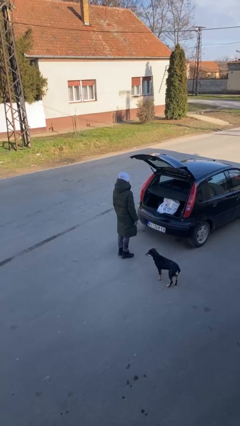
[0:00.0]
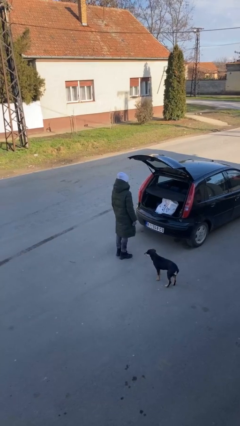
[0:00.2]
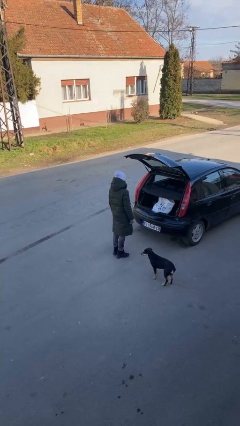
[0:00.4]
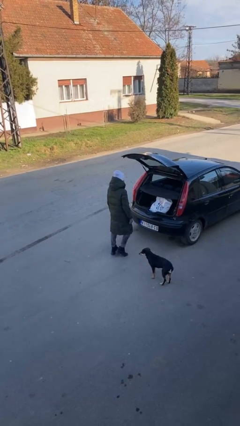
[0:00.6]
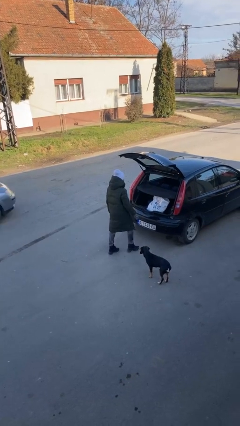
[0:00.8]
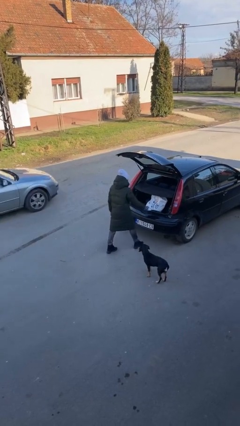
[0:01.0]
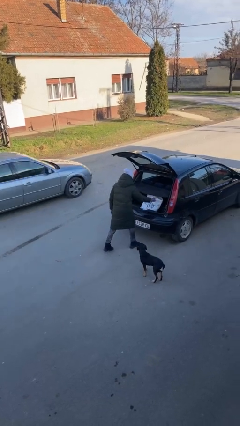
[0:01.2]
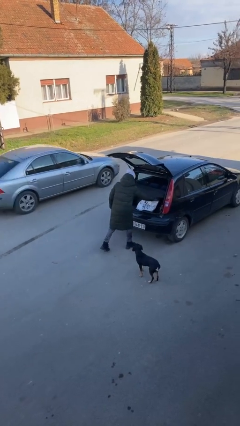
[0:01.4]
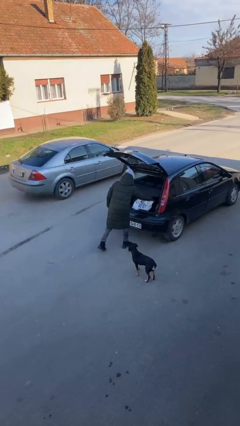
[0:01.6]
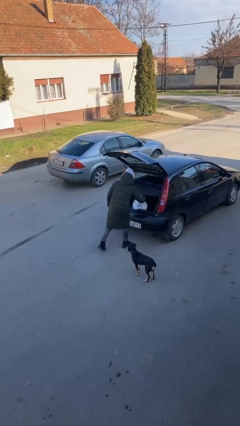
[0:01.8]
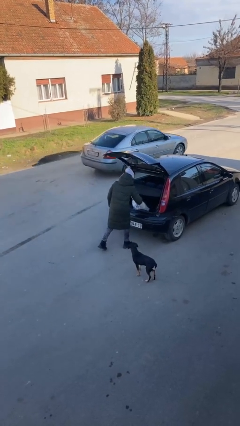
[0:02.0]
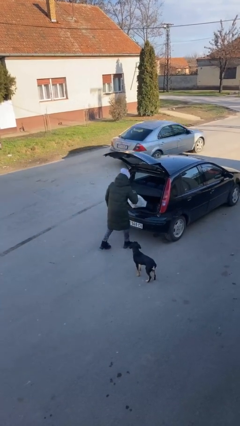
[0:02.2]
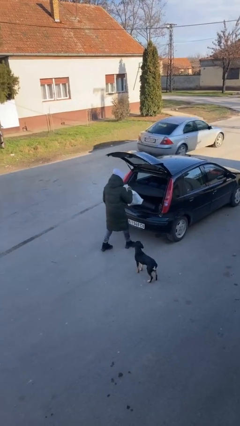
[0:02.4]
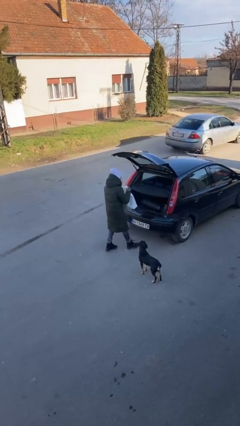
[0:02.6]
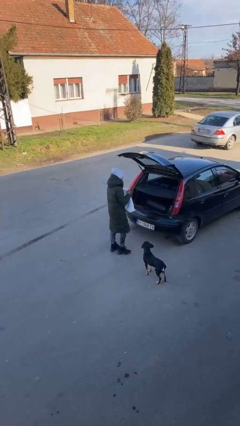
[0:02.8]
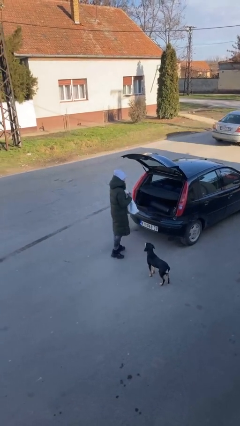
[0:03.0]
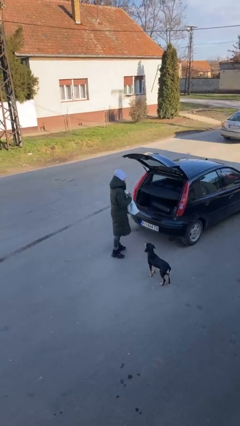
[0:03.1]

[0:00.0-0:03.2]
person unloads car

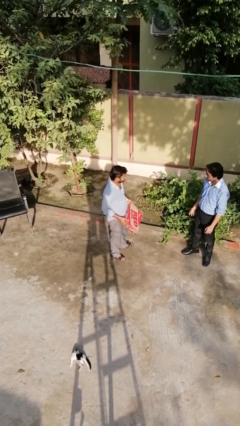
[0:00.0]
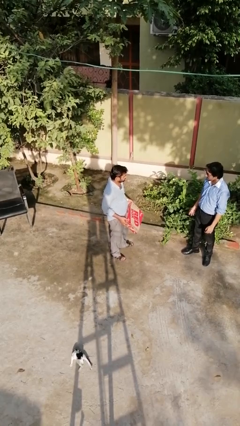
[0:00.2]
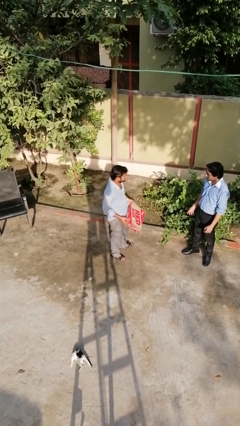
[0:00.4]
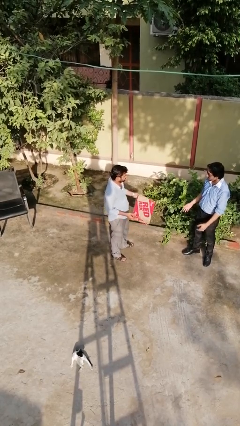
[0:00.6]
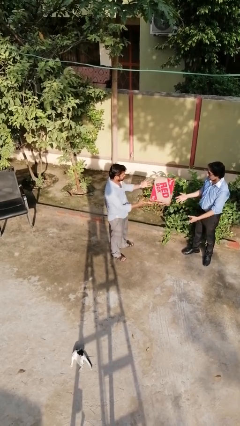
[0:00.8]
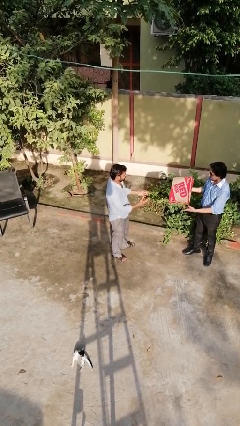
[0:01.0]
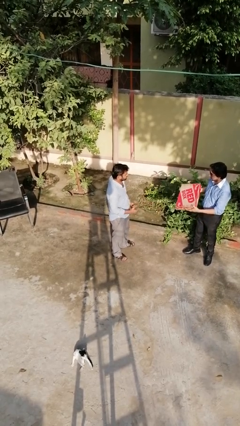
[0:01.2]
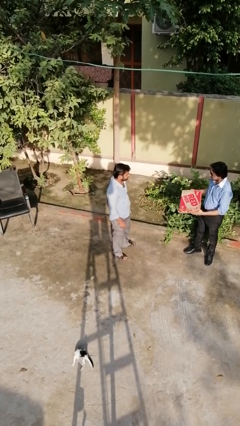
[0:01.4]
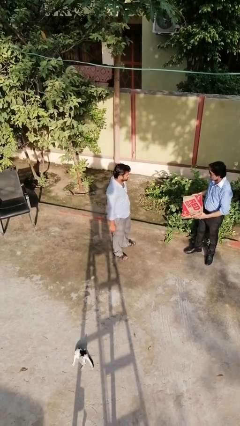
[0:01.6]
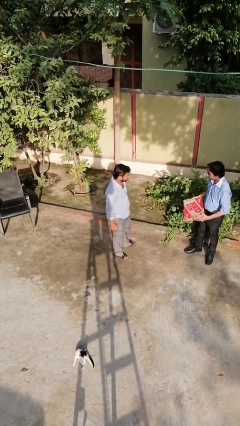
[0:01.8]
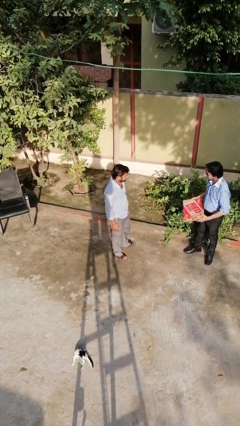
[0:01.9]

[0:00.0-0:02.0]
person throws object to person

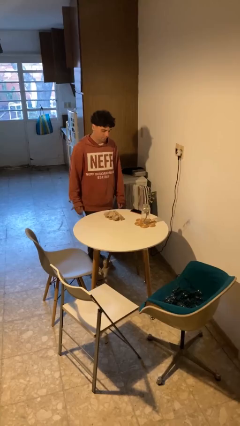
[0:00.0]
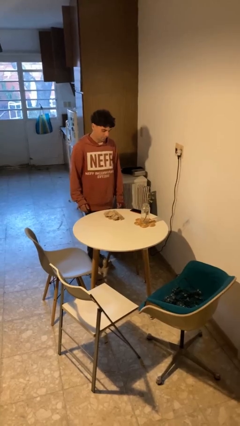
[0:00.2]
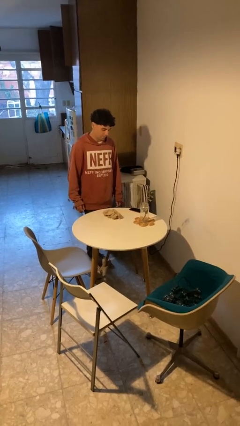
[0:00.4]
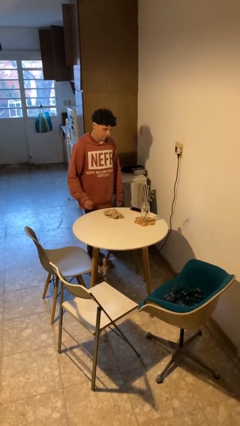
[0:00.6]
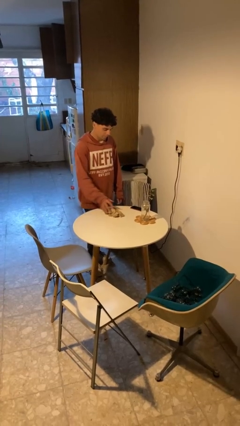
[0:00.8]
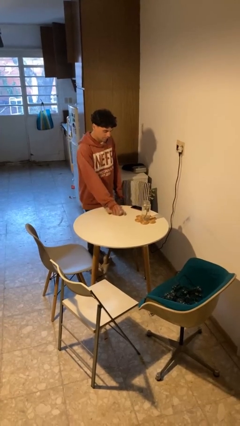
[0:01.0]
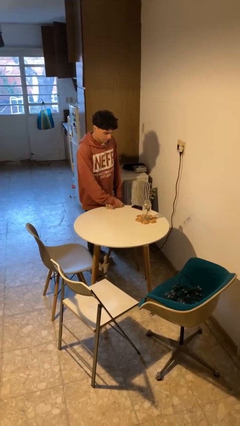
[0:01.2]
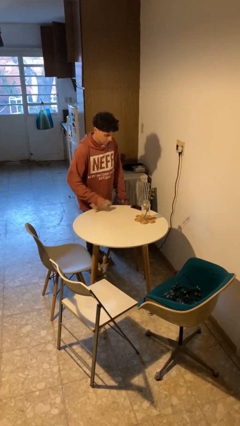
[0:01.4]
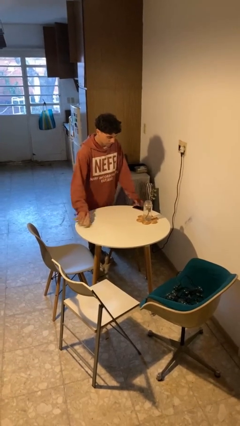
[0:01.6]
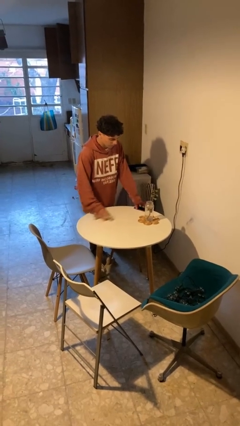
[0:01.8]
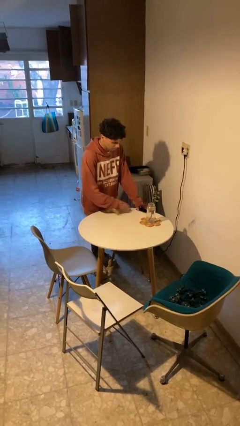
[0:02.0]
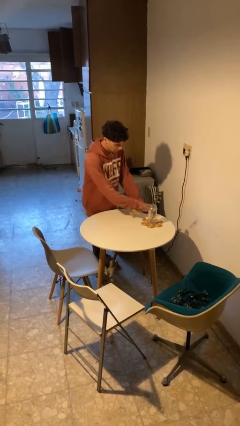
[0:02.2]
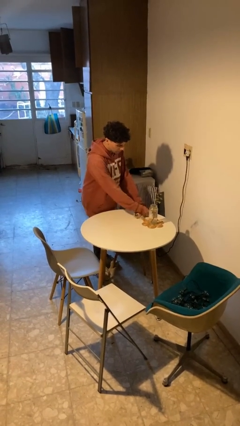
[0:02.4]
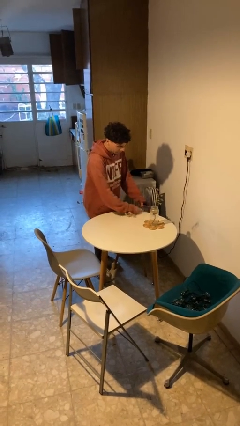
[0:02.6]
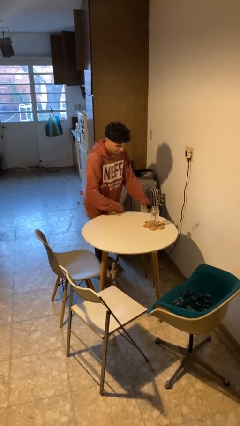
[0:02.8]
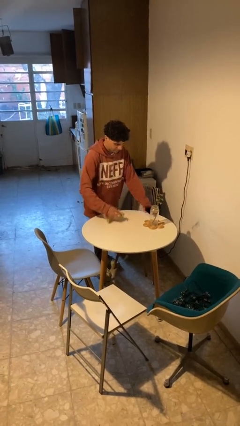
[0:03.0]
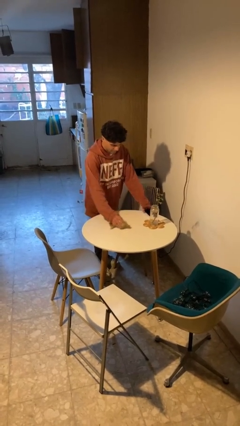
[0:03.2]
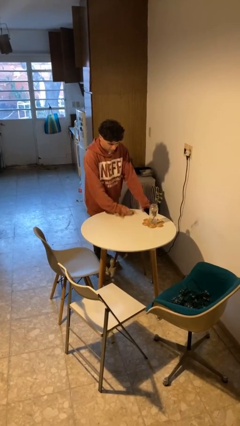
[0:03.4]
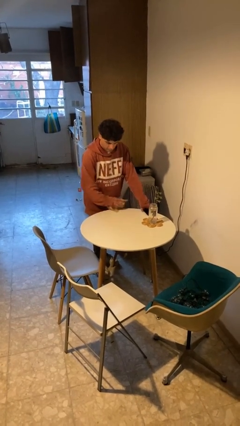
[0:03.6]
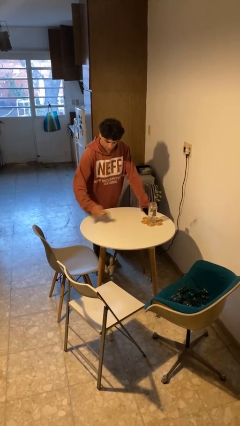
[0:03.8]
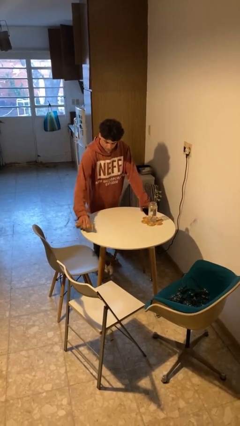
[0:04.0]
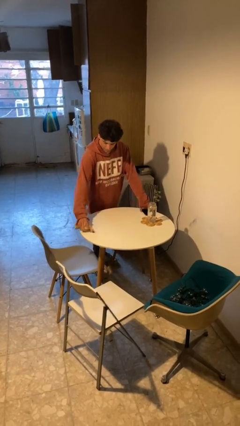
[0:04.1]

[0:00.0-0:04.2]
person cleans table with rag

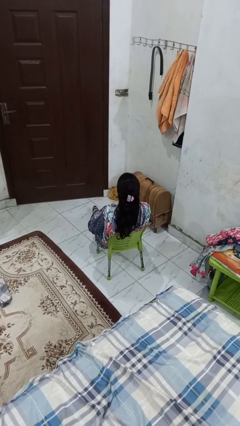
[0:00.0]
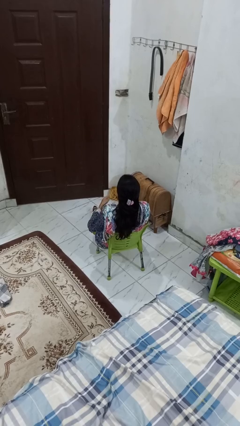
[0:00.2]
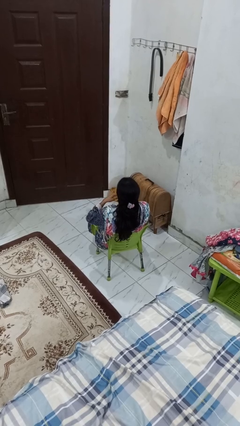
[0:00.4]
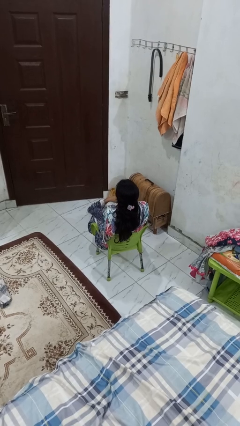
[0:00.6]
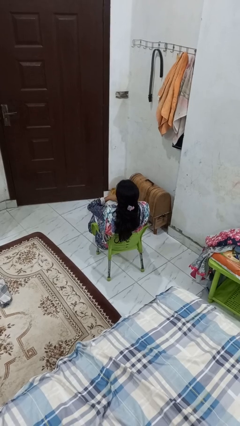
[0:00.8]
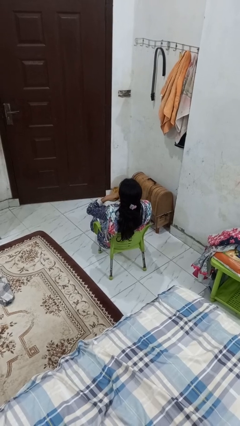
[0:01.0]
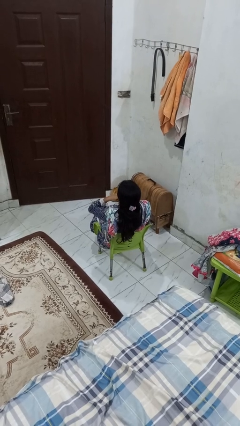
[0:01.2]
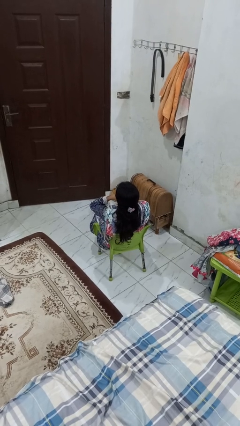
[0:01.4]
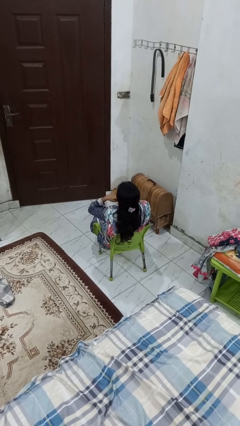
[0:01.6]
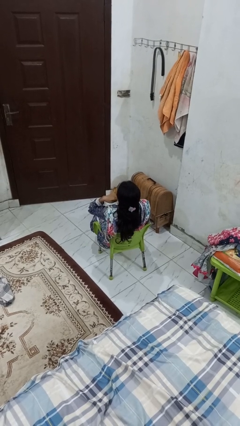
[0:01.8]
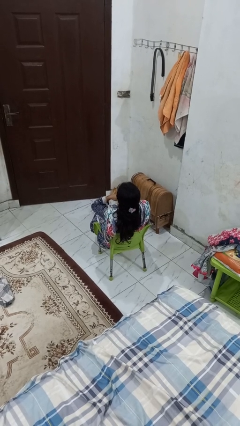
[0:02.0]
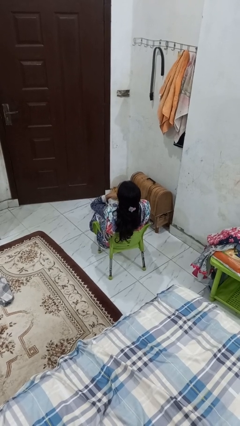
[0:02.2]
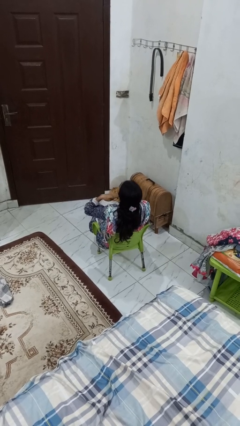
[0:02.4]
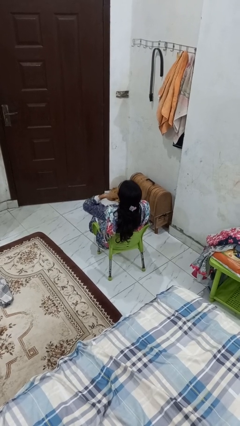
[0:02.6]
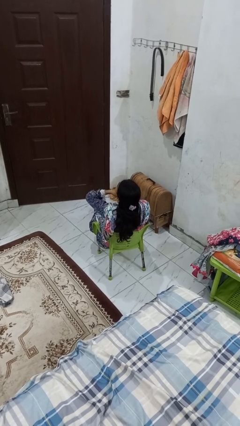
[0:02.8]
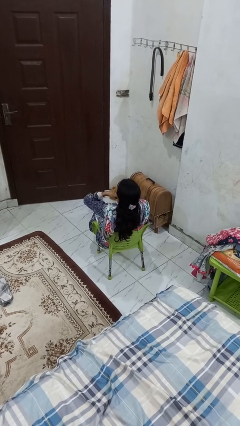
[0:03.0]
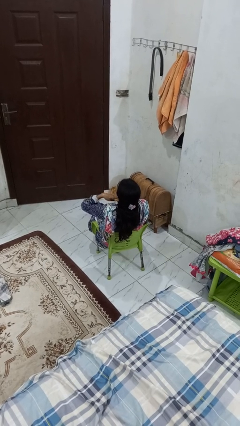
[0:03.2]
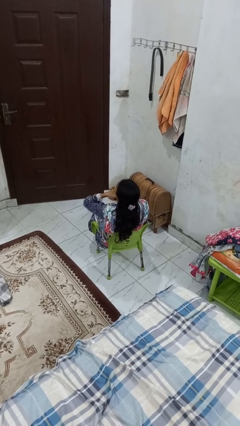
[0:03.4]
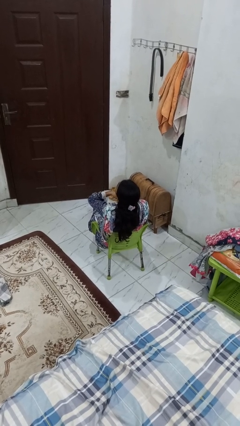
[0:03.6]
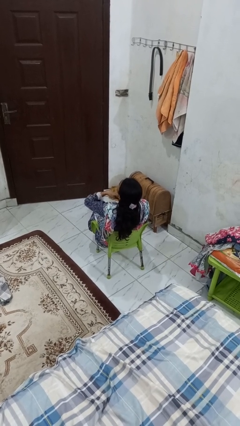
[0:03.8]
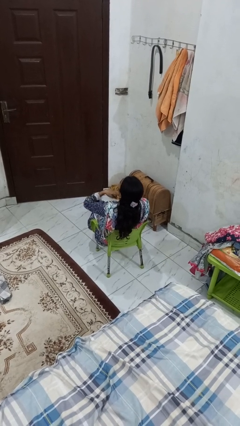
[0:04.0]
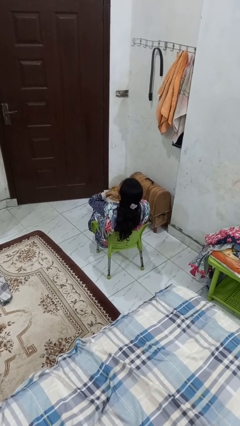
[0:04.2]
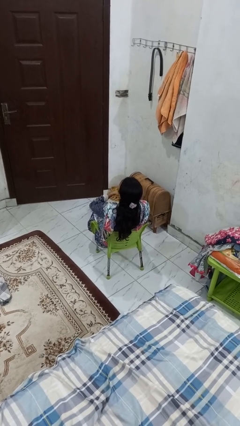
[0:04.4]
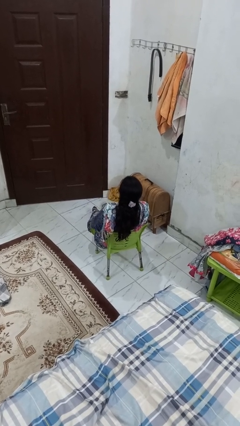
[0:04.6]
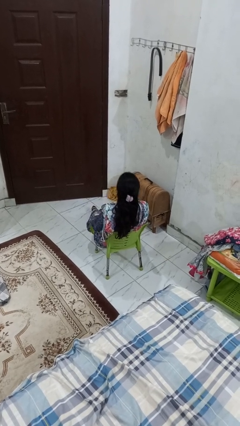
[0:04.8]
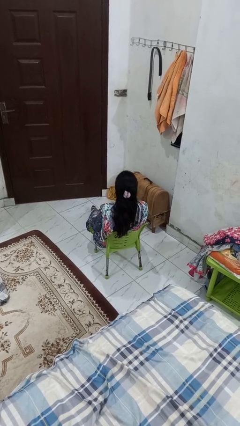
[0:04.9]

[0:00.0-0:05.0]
person gestures cut

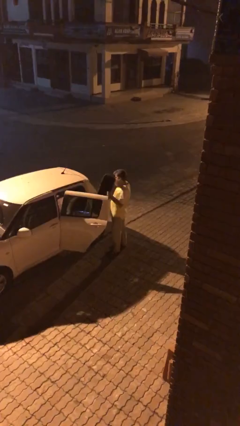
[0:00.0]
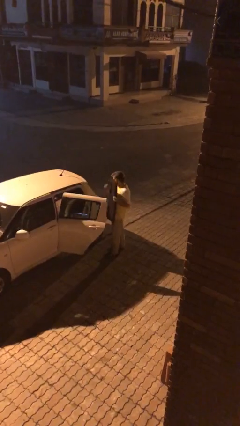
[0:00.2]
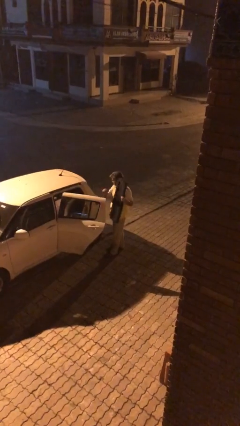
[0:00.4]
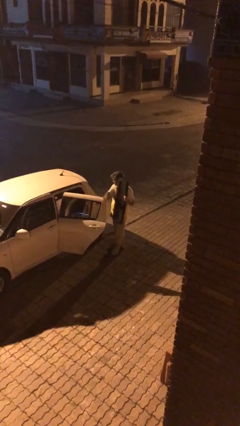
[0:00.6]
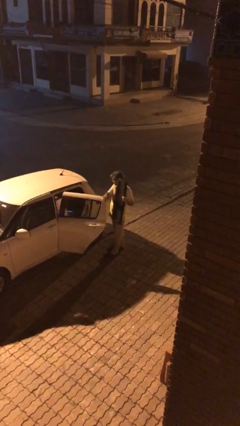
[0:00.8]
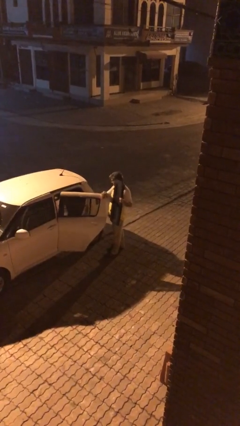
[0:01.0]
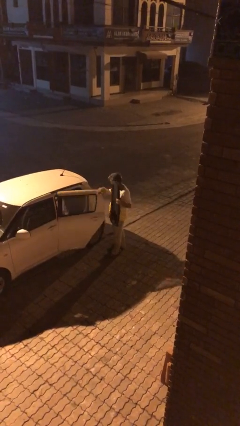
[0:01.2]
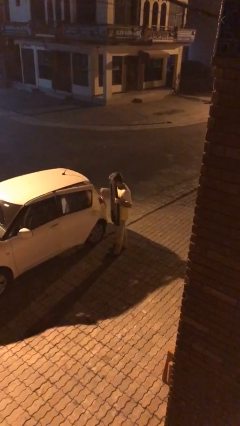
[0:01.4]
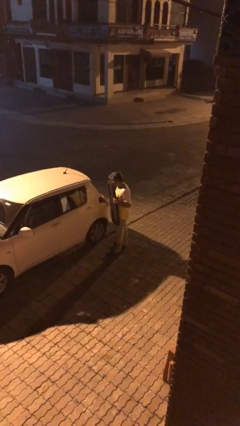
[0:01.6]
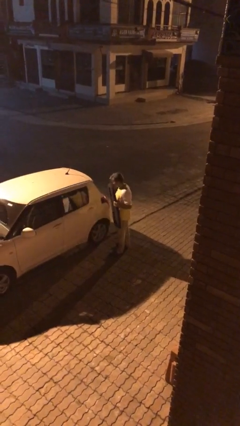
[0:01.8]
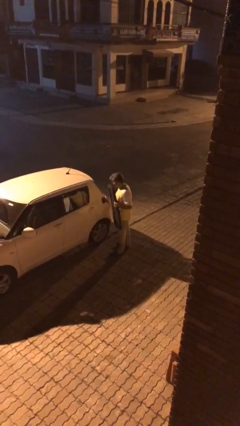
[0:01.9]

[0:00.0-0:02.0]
person closes car door

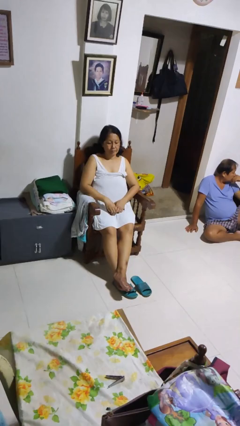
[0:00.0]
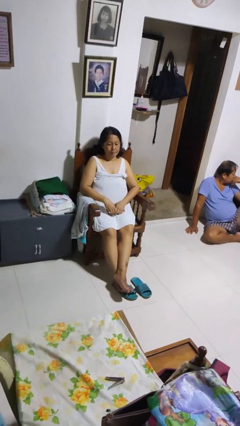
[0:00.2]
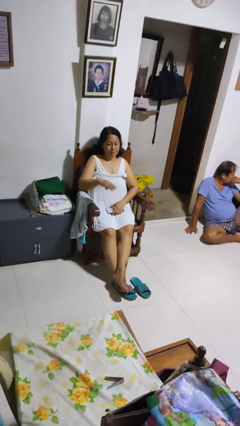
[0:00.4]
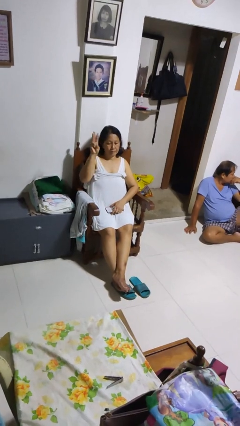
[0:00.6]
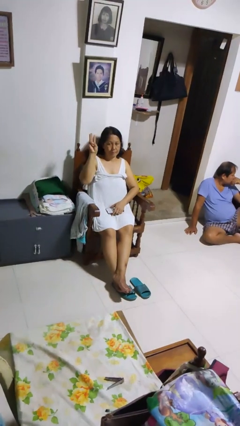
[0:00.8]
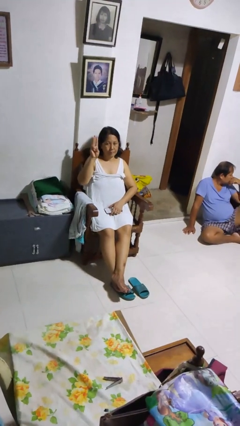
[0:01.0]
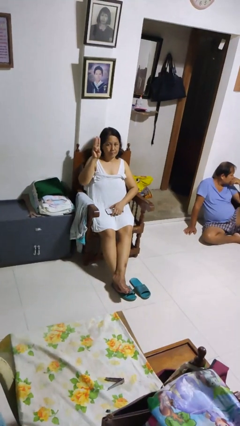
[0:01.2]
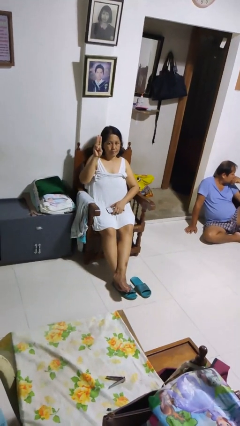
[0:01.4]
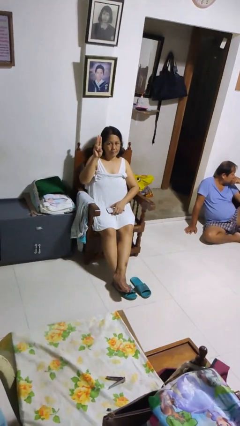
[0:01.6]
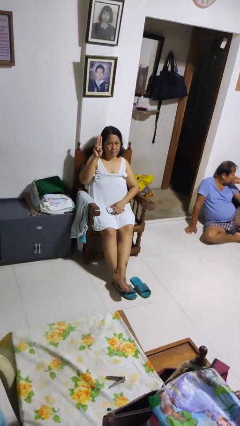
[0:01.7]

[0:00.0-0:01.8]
person gestures number three
